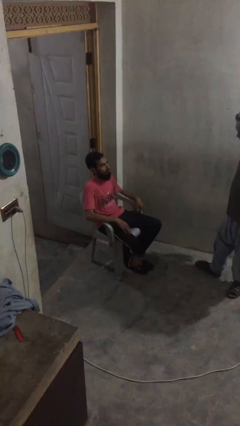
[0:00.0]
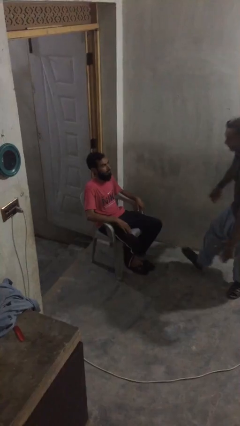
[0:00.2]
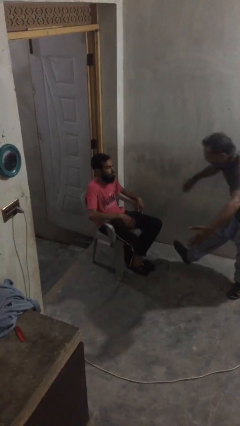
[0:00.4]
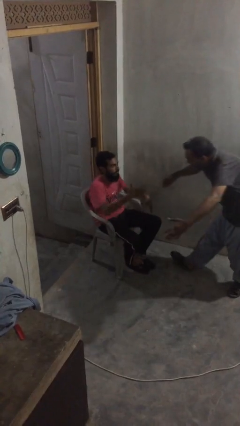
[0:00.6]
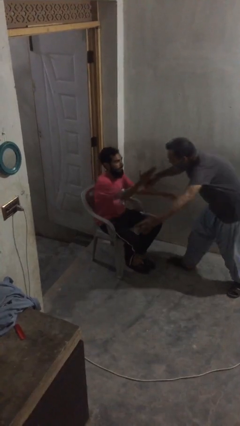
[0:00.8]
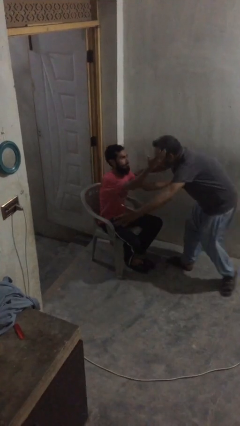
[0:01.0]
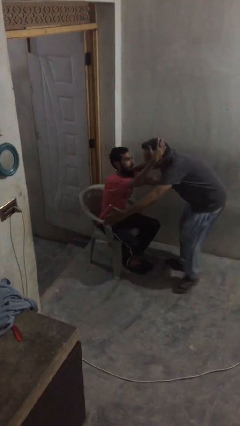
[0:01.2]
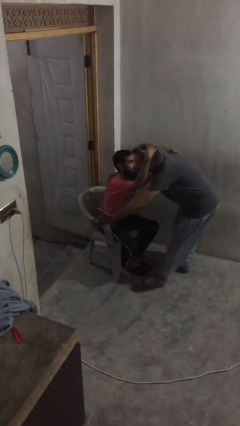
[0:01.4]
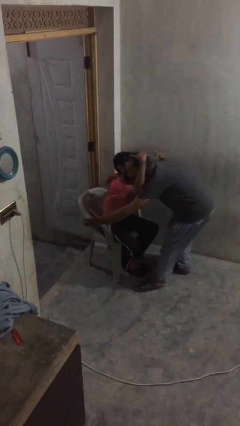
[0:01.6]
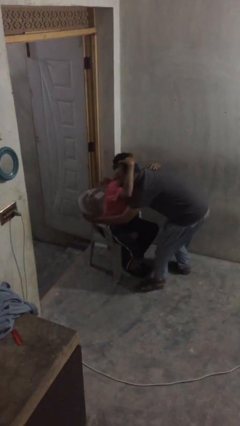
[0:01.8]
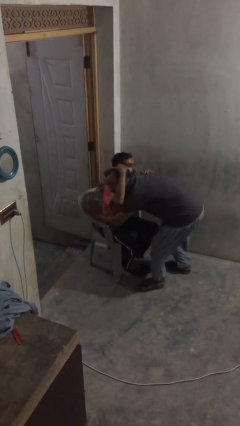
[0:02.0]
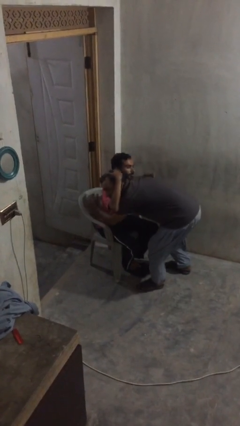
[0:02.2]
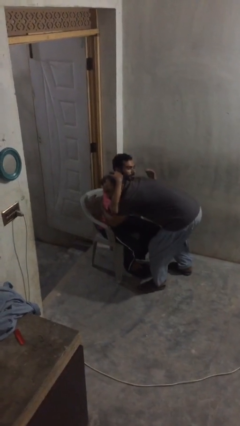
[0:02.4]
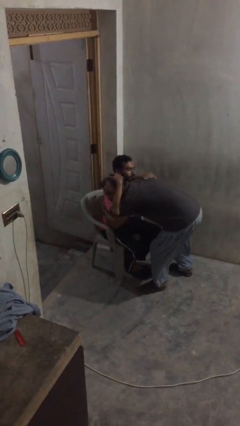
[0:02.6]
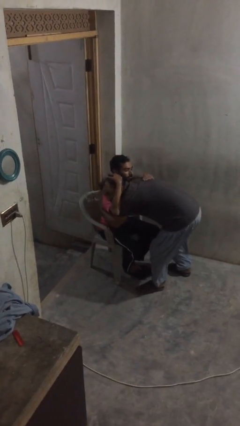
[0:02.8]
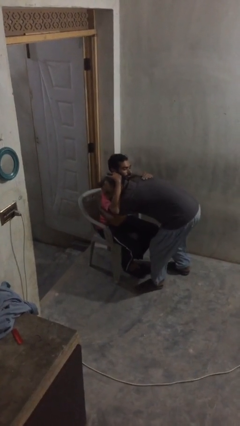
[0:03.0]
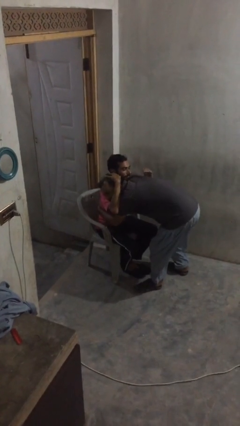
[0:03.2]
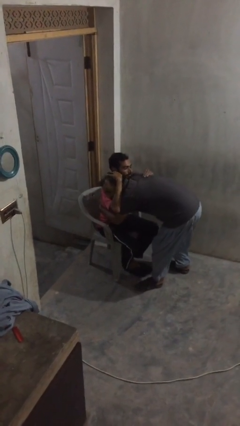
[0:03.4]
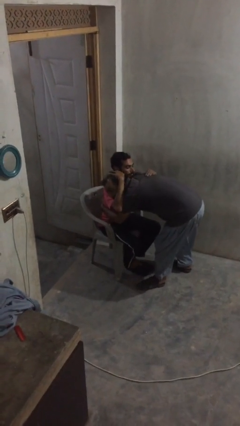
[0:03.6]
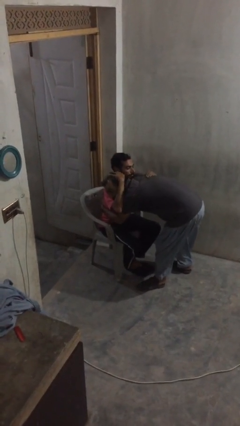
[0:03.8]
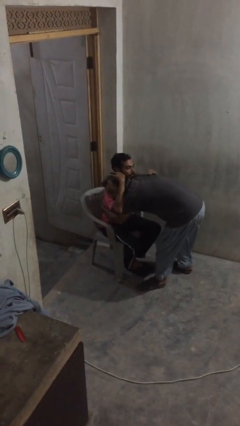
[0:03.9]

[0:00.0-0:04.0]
person embraces person

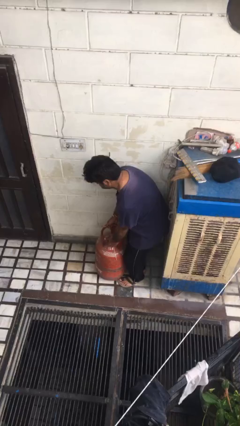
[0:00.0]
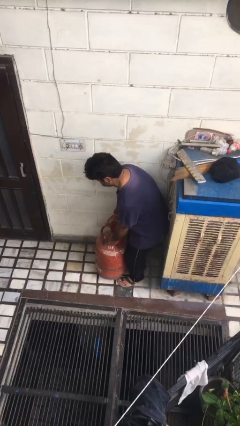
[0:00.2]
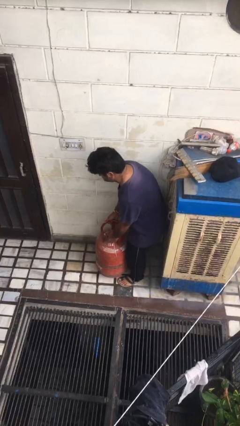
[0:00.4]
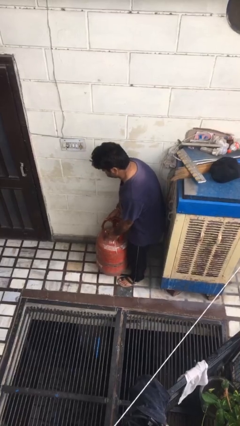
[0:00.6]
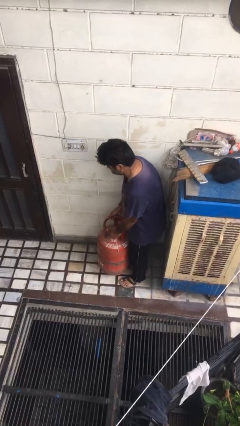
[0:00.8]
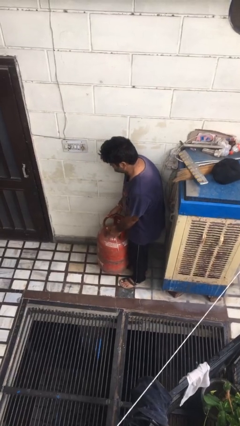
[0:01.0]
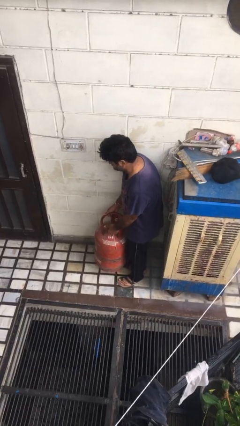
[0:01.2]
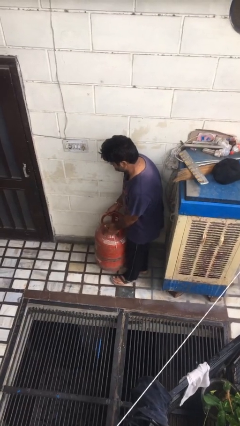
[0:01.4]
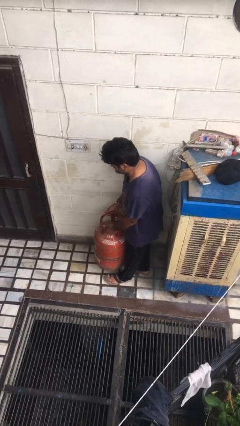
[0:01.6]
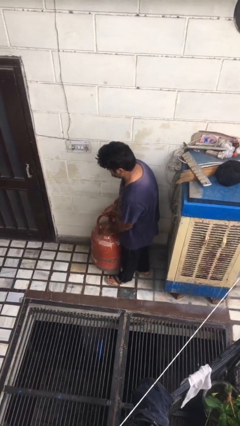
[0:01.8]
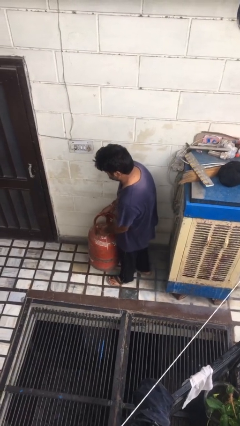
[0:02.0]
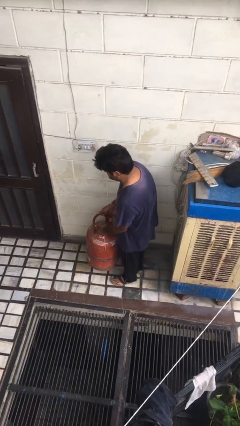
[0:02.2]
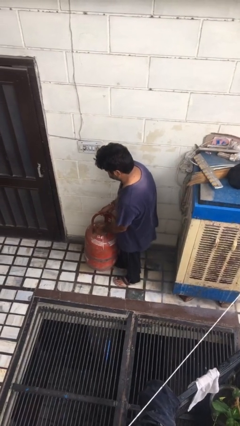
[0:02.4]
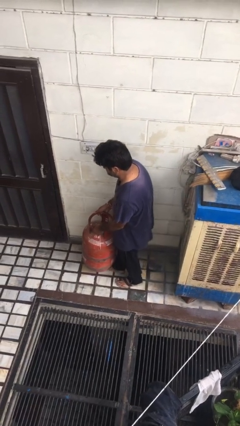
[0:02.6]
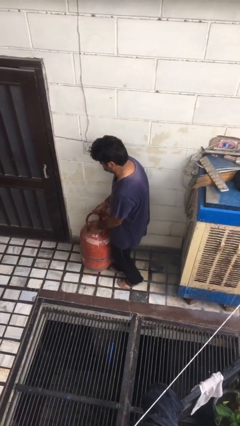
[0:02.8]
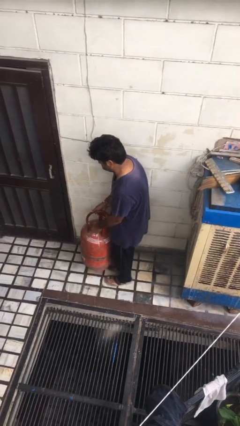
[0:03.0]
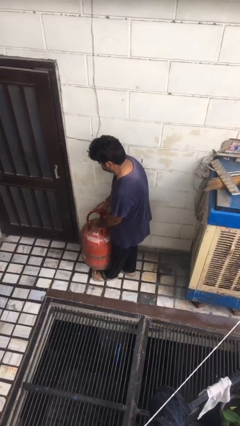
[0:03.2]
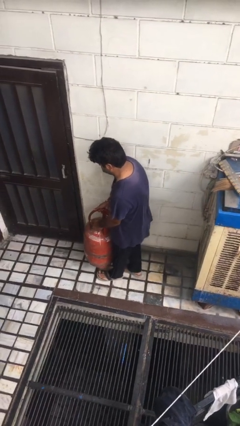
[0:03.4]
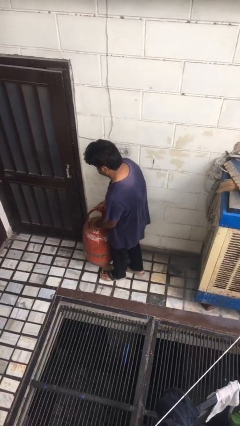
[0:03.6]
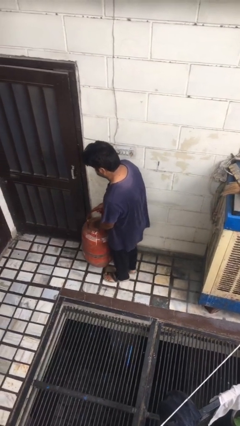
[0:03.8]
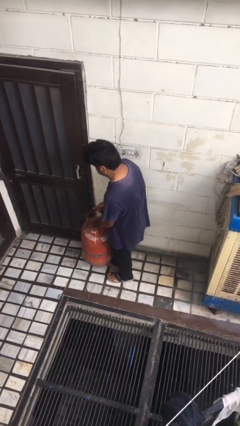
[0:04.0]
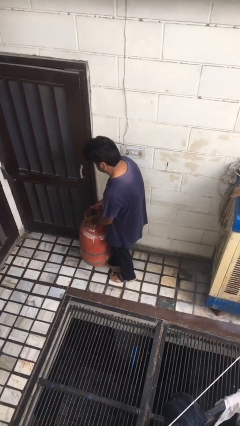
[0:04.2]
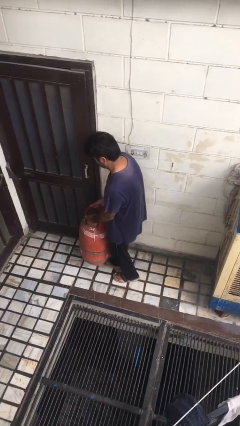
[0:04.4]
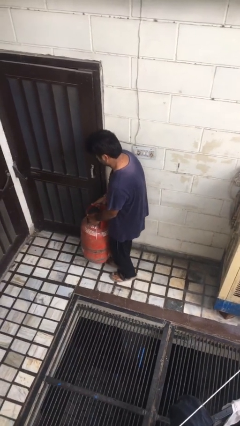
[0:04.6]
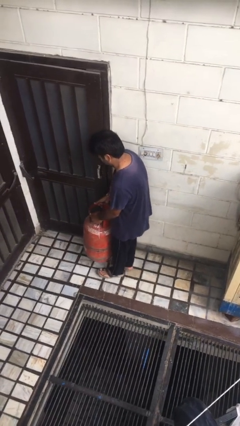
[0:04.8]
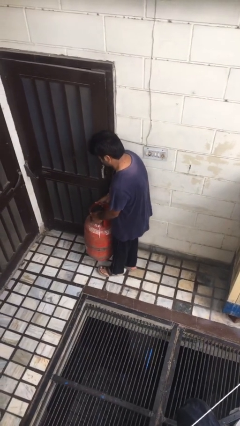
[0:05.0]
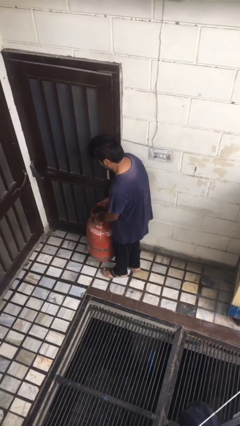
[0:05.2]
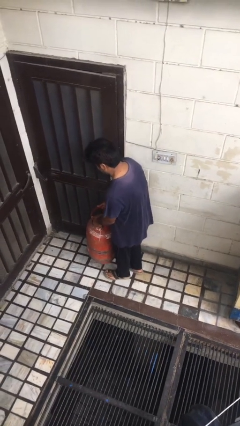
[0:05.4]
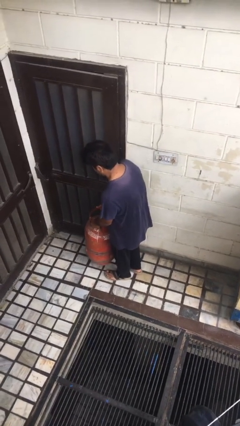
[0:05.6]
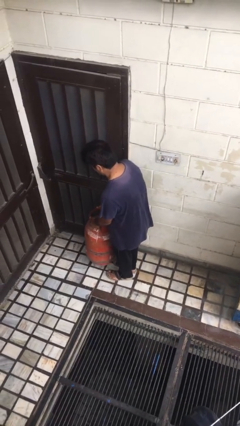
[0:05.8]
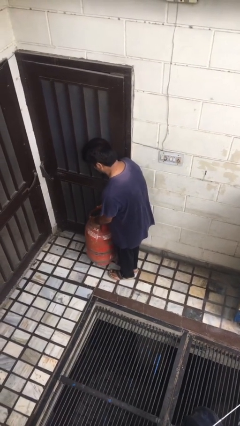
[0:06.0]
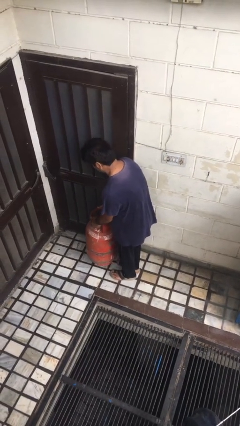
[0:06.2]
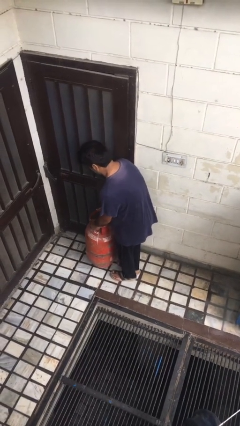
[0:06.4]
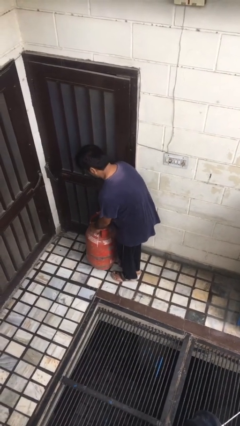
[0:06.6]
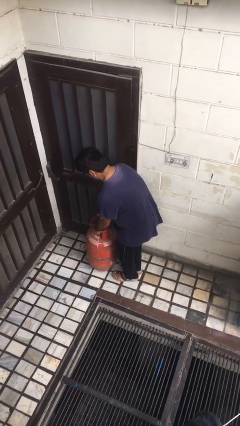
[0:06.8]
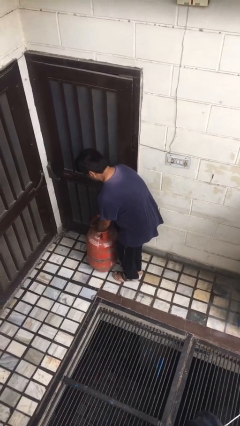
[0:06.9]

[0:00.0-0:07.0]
person carries heavy object

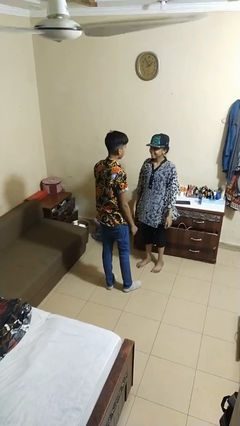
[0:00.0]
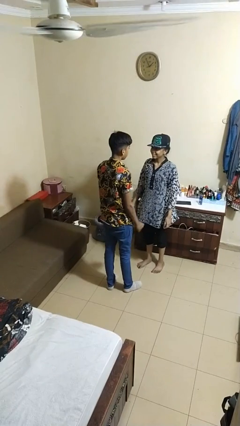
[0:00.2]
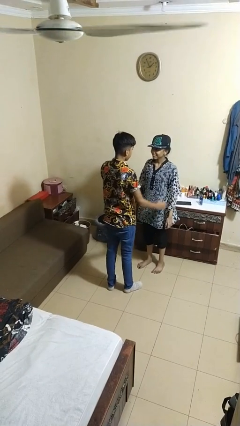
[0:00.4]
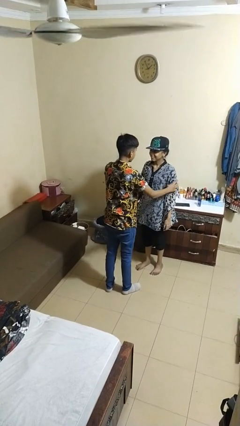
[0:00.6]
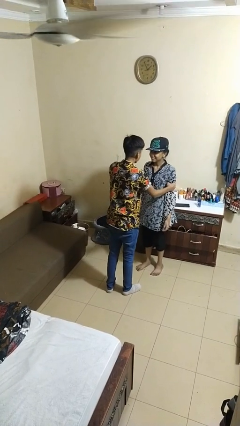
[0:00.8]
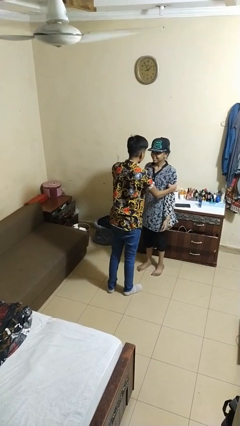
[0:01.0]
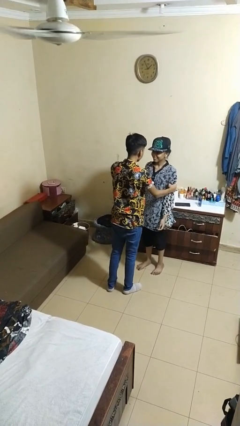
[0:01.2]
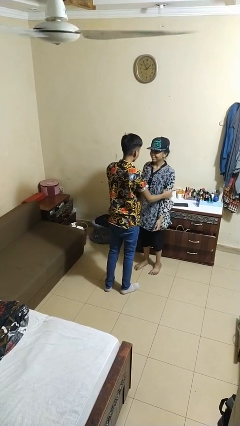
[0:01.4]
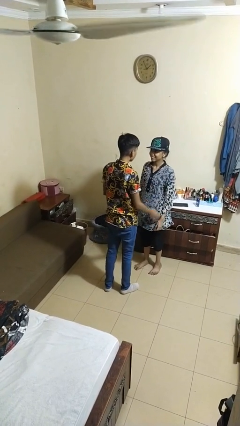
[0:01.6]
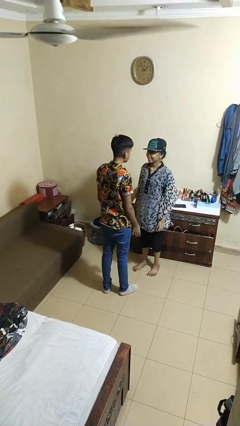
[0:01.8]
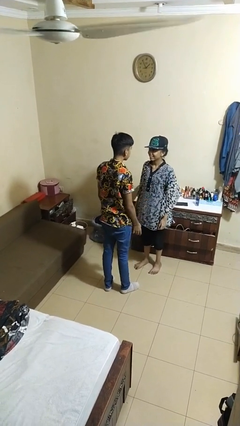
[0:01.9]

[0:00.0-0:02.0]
person grabs person by bicep

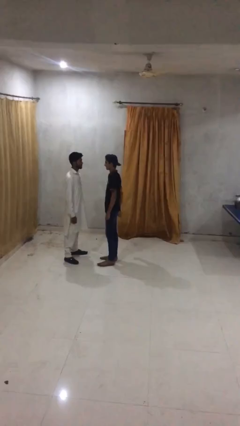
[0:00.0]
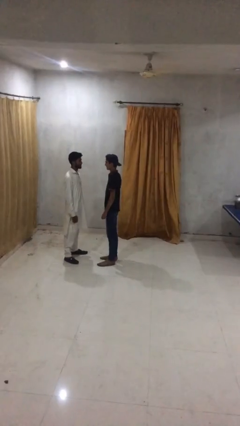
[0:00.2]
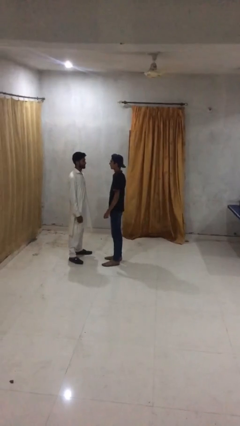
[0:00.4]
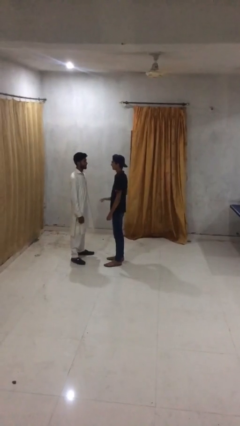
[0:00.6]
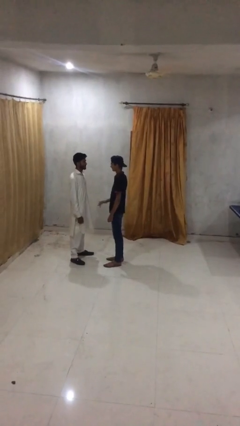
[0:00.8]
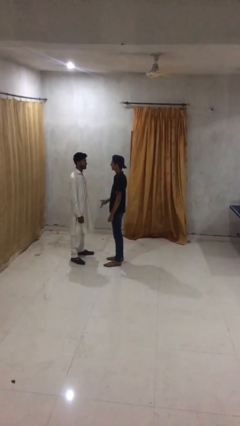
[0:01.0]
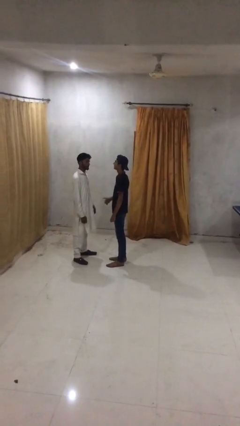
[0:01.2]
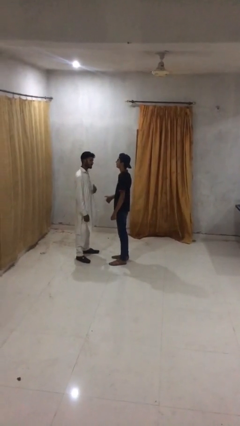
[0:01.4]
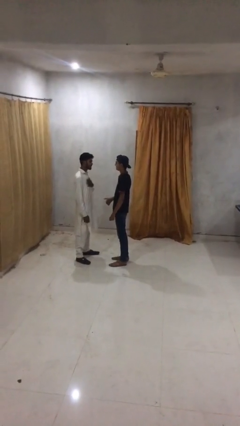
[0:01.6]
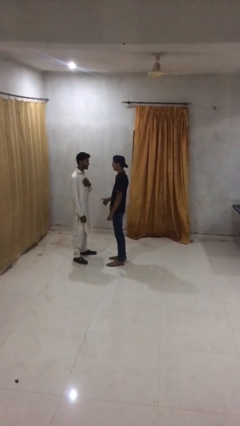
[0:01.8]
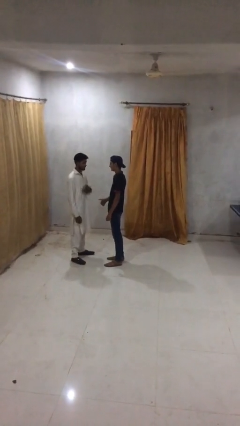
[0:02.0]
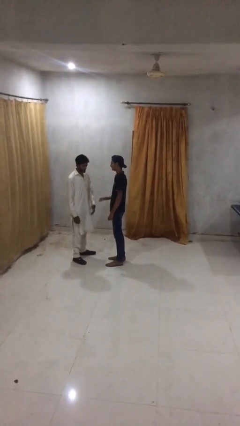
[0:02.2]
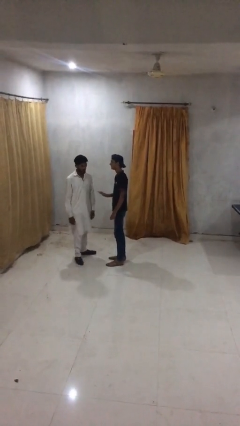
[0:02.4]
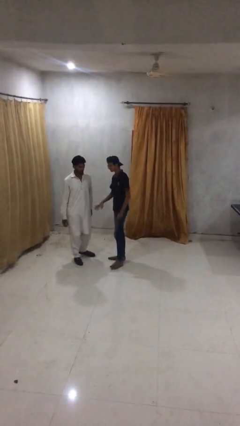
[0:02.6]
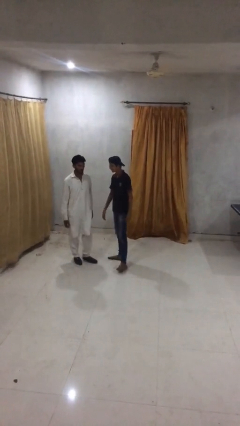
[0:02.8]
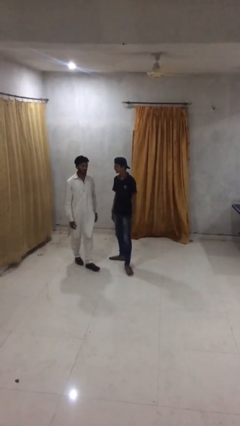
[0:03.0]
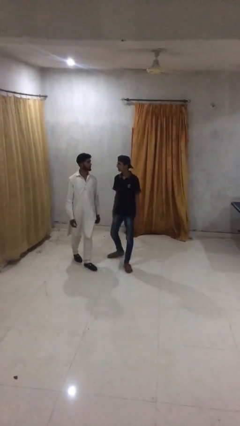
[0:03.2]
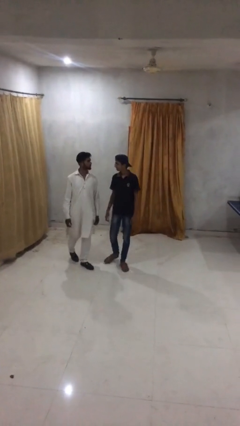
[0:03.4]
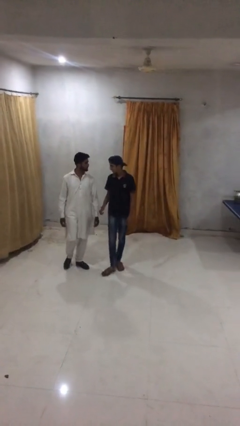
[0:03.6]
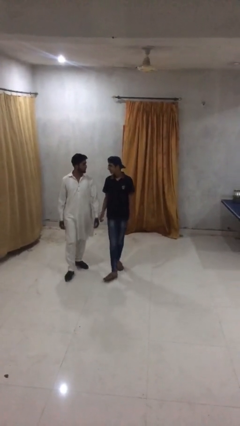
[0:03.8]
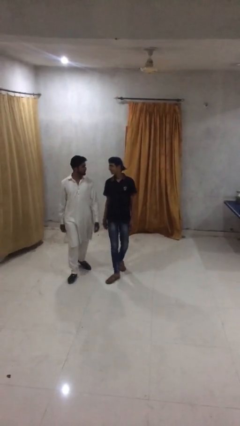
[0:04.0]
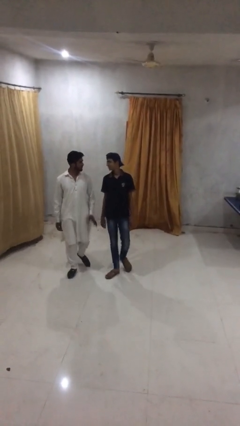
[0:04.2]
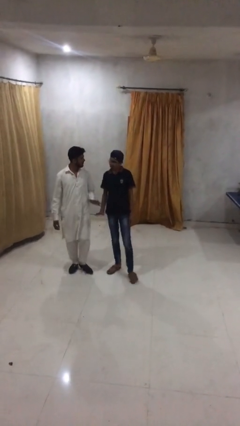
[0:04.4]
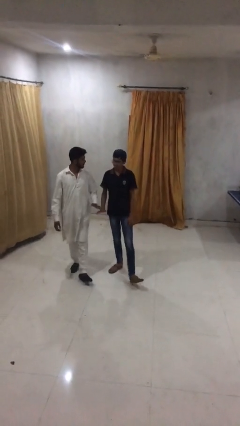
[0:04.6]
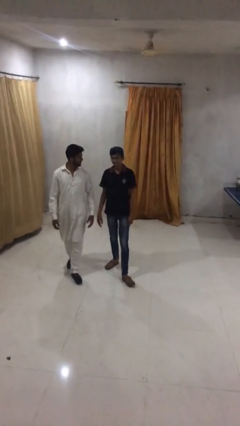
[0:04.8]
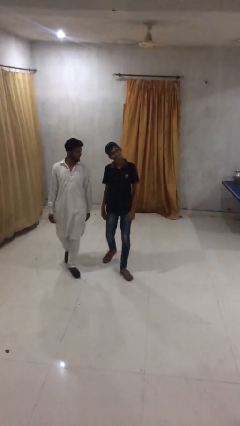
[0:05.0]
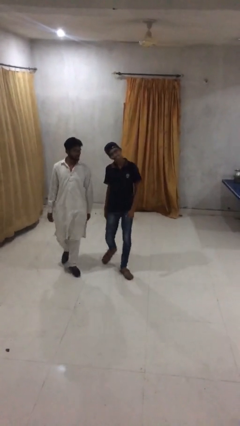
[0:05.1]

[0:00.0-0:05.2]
person talks to person
